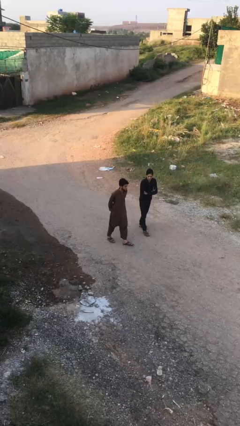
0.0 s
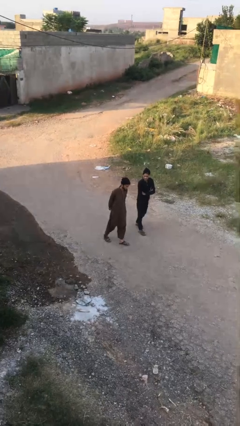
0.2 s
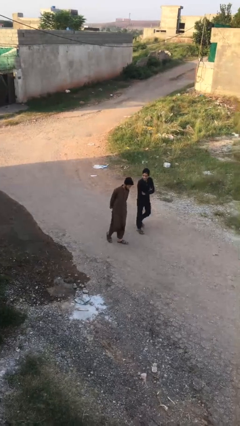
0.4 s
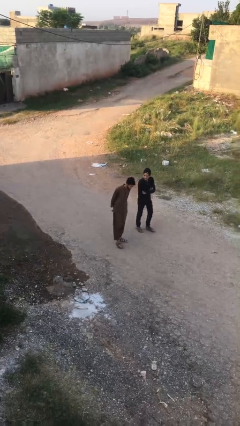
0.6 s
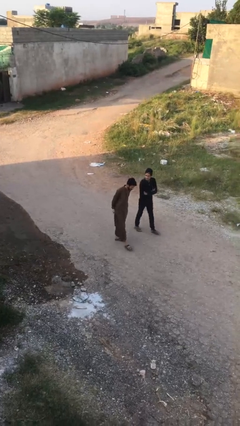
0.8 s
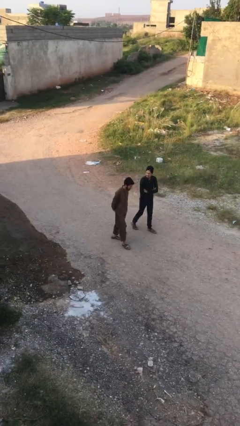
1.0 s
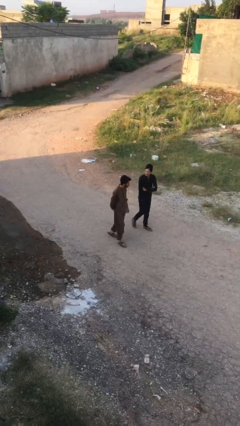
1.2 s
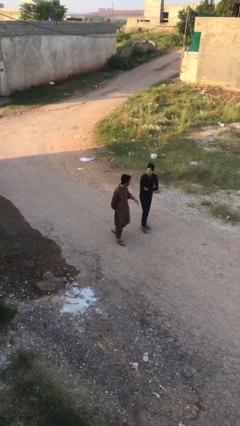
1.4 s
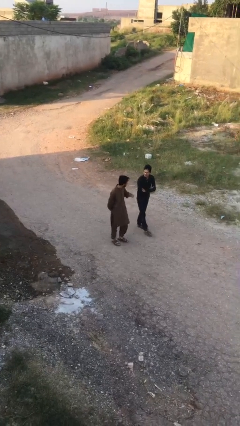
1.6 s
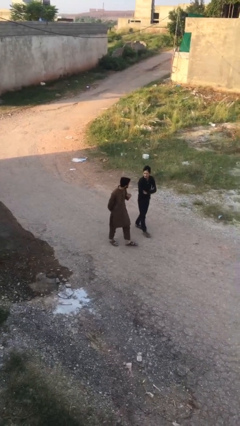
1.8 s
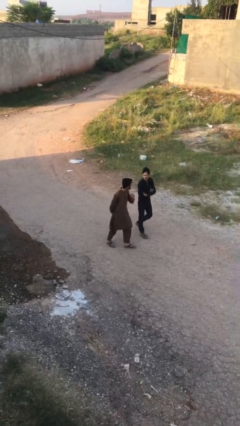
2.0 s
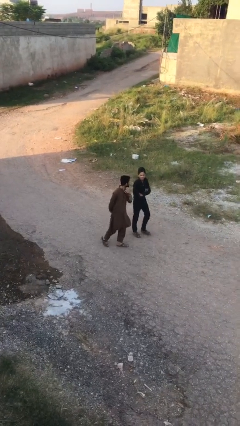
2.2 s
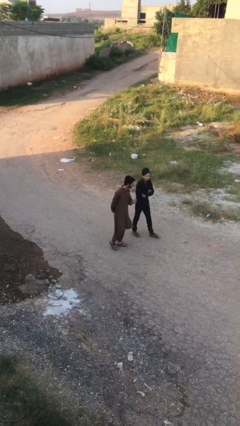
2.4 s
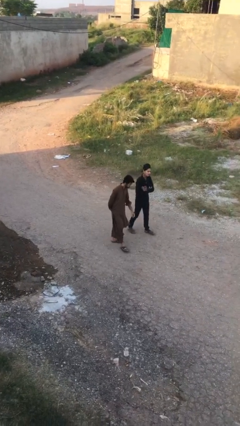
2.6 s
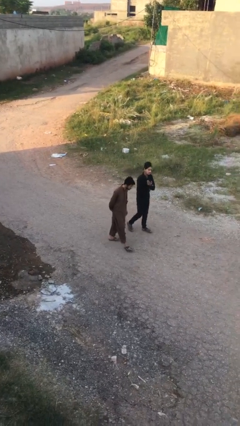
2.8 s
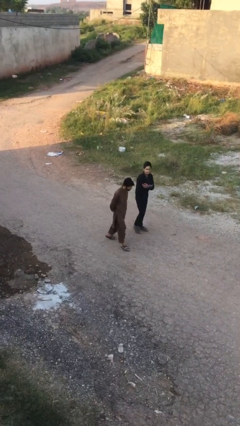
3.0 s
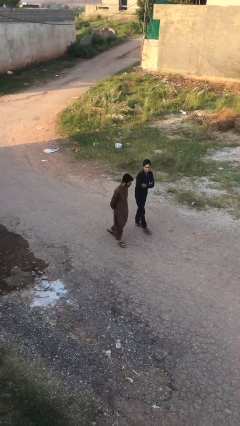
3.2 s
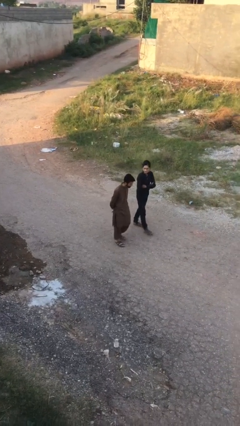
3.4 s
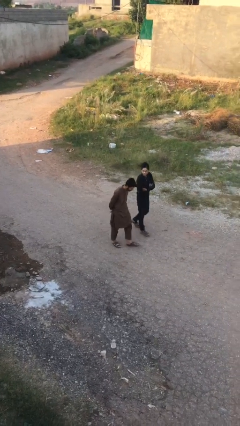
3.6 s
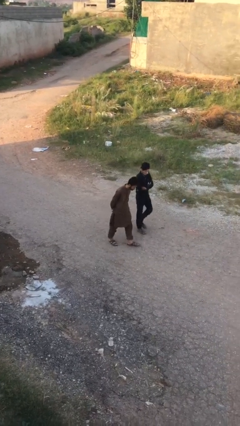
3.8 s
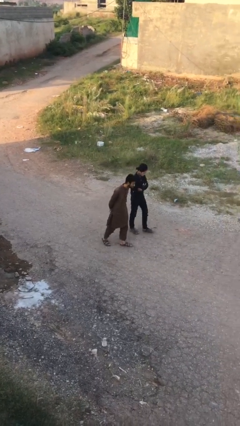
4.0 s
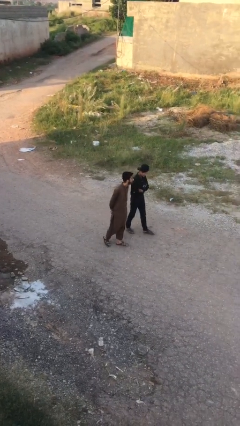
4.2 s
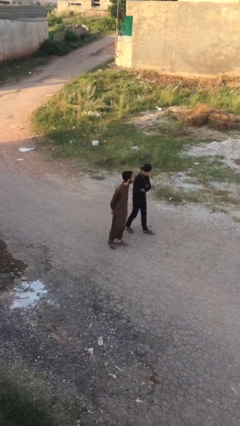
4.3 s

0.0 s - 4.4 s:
person talks to person

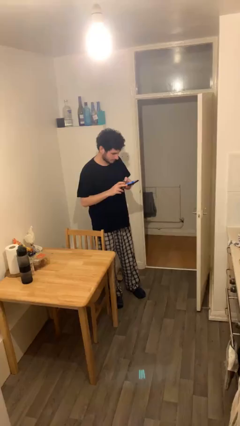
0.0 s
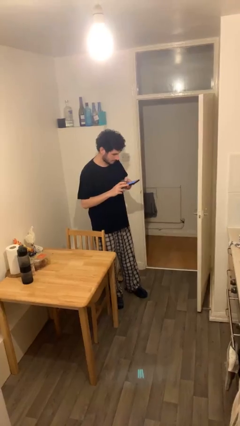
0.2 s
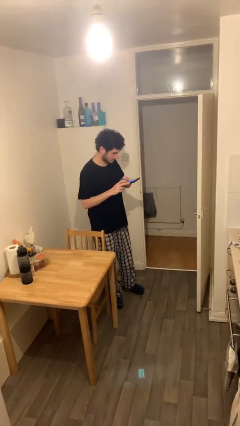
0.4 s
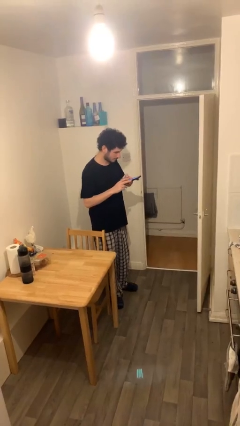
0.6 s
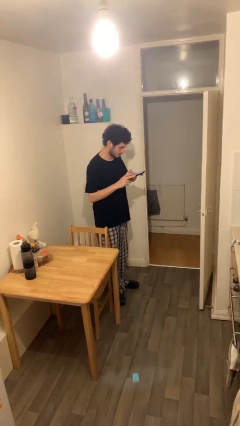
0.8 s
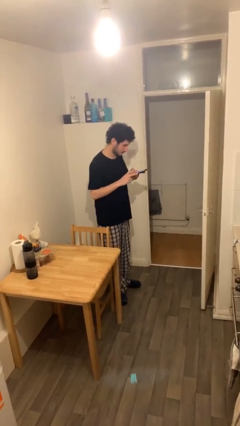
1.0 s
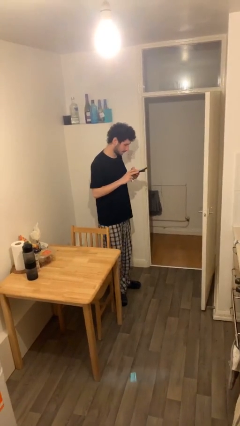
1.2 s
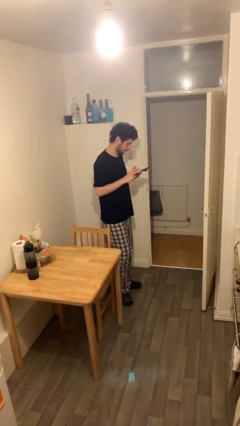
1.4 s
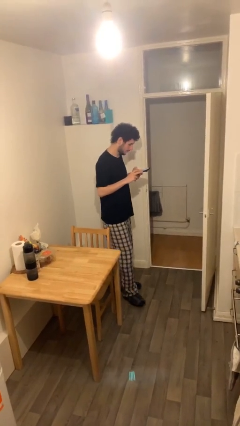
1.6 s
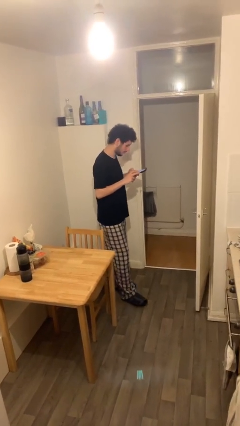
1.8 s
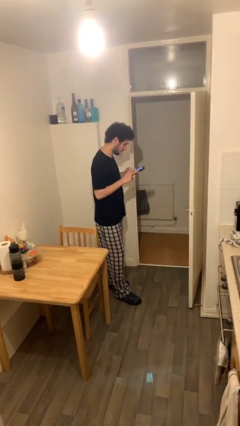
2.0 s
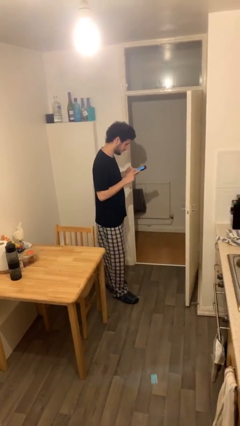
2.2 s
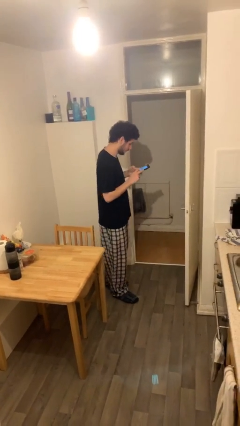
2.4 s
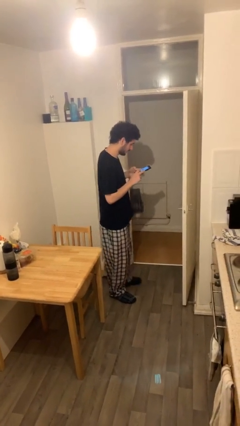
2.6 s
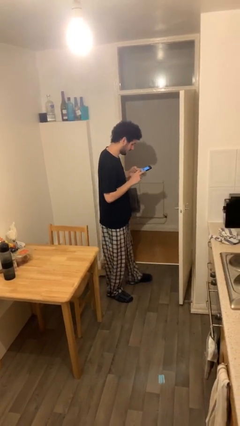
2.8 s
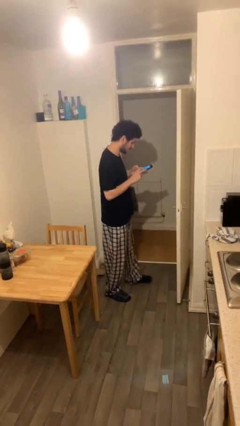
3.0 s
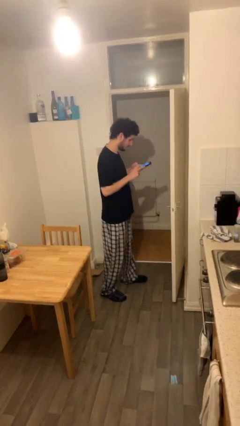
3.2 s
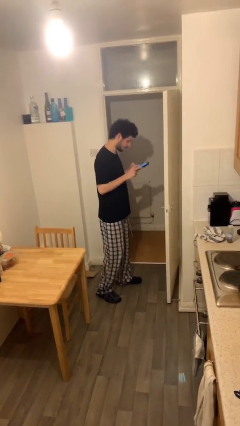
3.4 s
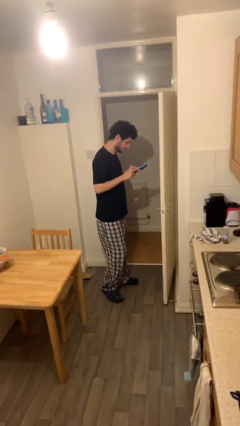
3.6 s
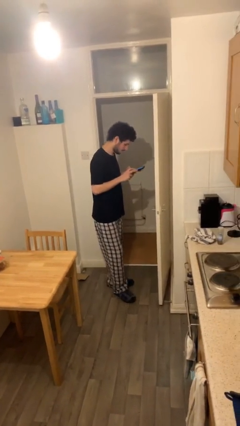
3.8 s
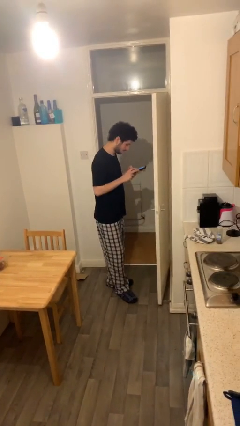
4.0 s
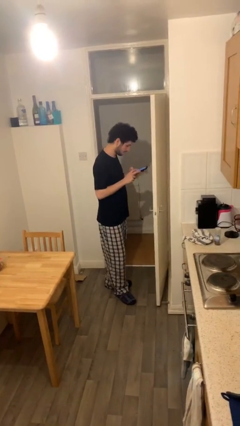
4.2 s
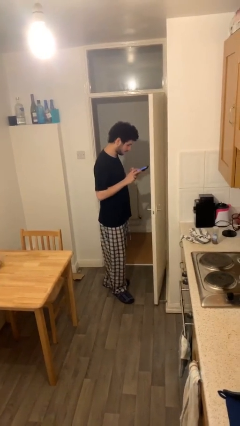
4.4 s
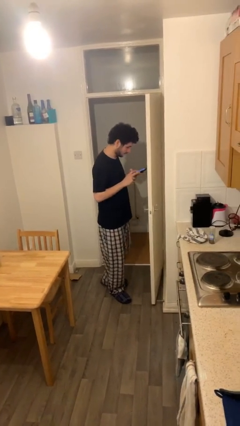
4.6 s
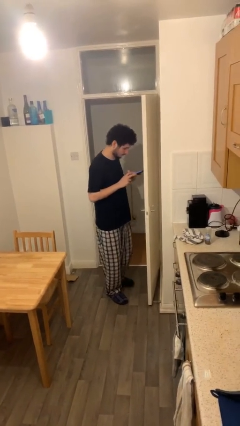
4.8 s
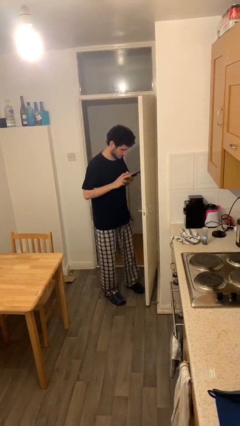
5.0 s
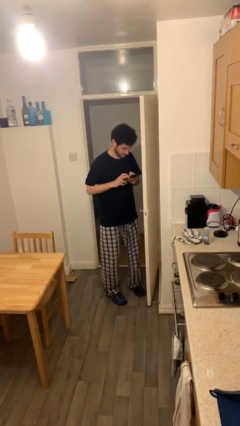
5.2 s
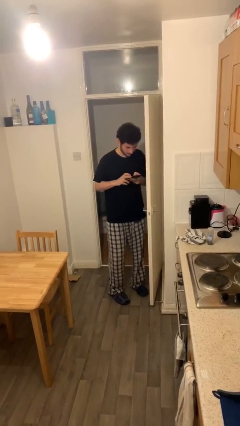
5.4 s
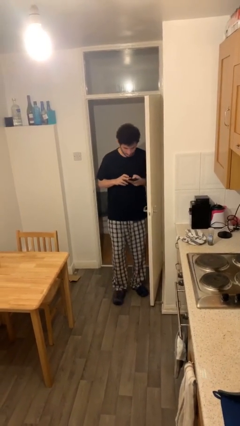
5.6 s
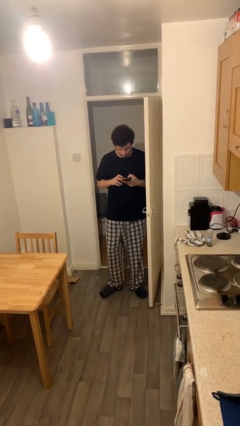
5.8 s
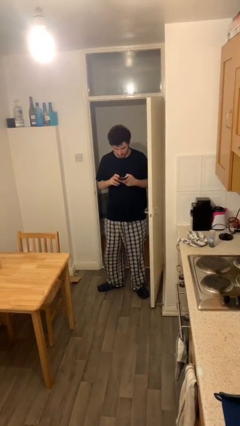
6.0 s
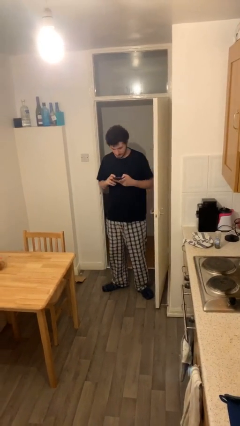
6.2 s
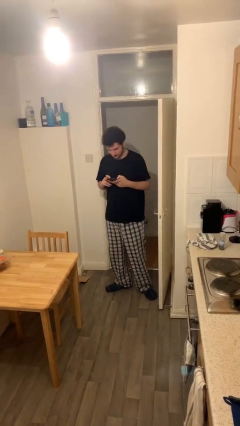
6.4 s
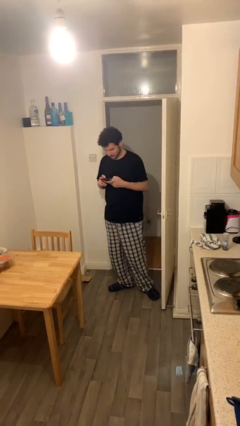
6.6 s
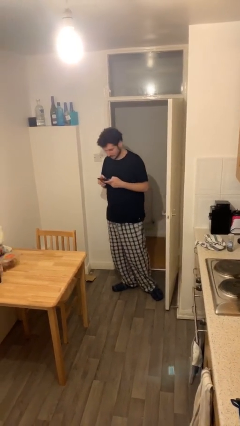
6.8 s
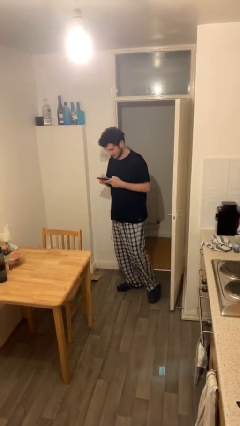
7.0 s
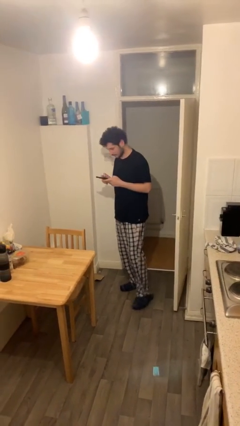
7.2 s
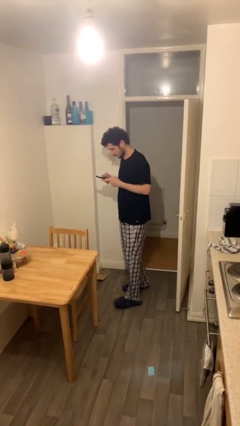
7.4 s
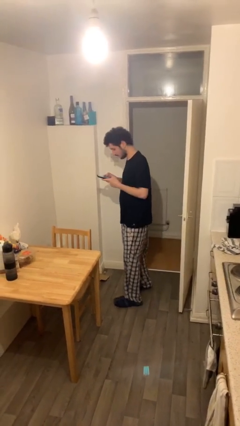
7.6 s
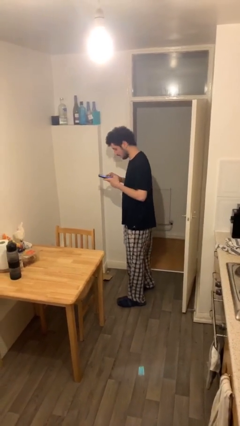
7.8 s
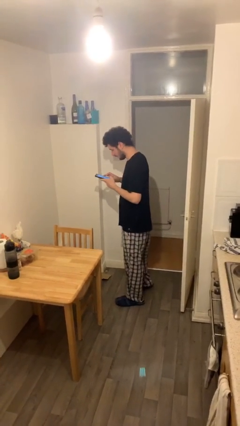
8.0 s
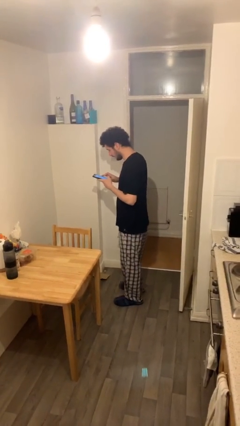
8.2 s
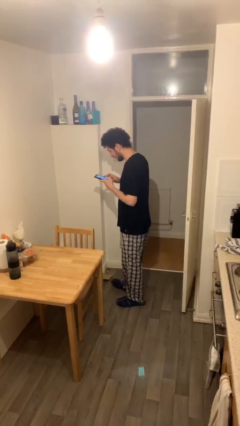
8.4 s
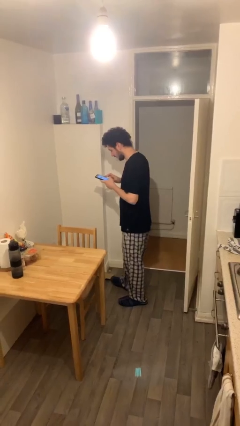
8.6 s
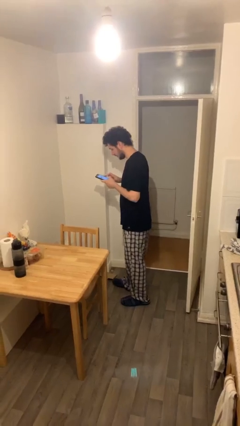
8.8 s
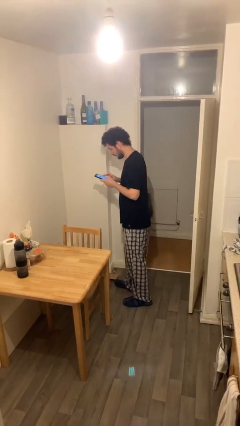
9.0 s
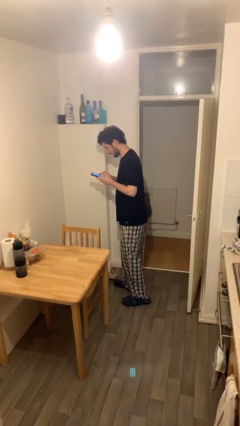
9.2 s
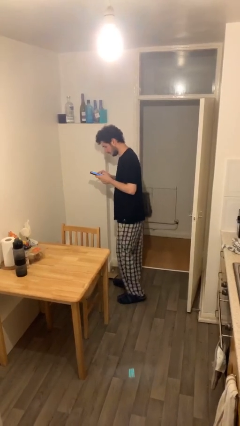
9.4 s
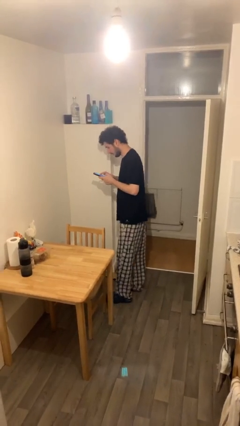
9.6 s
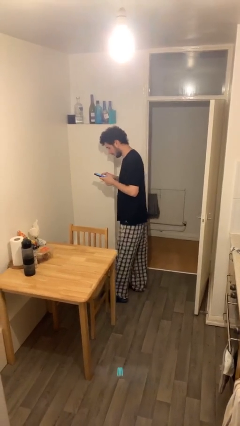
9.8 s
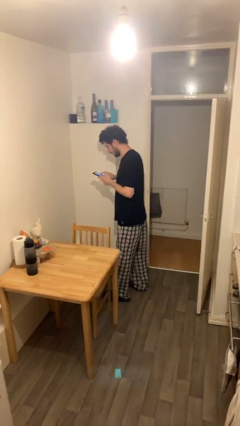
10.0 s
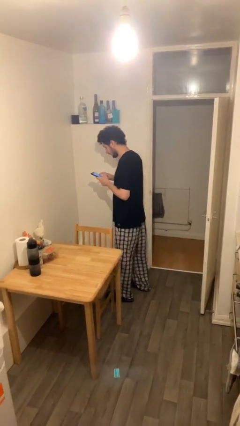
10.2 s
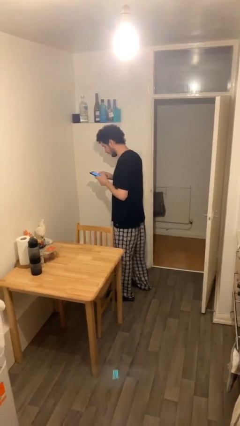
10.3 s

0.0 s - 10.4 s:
person texts on phone

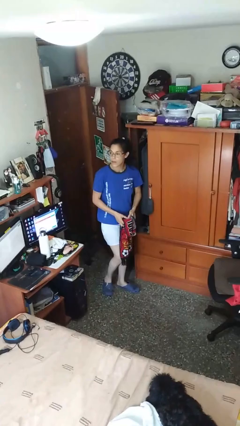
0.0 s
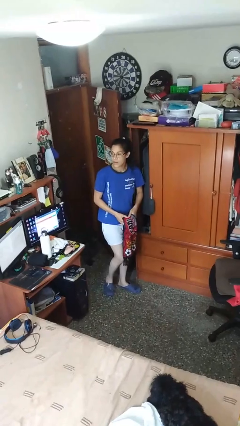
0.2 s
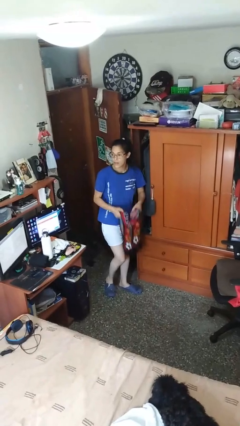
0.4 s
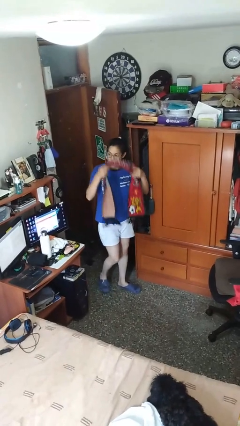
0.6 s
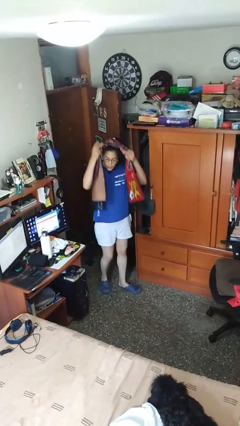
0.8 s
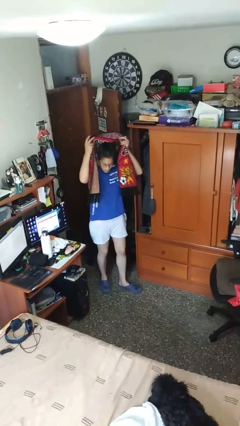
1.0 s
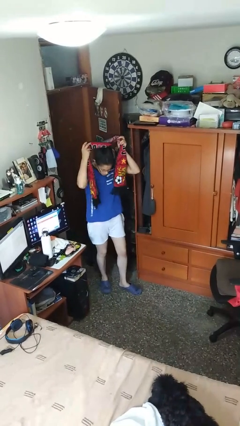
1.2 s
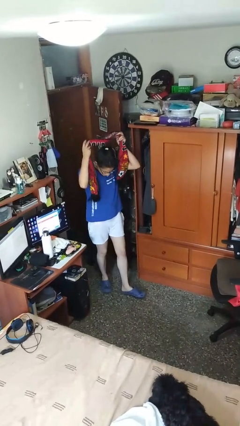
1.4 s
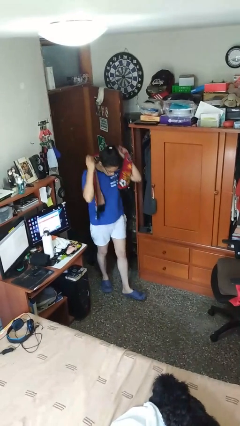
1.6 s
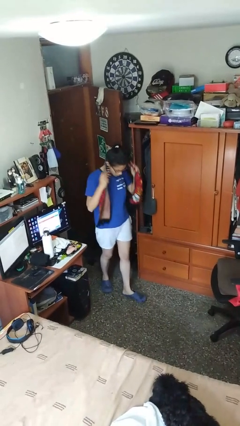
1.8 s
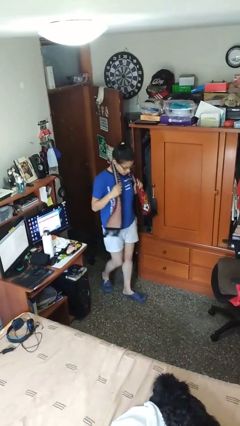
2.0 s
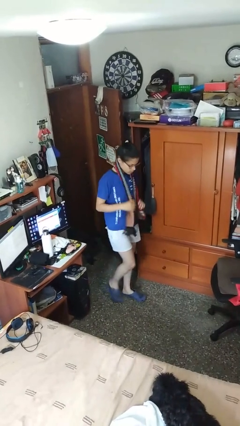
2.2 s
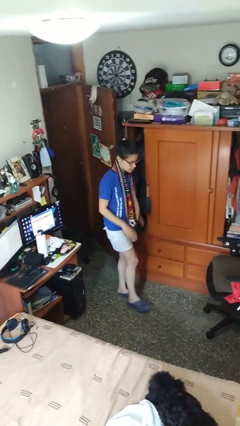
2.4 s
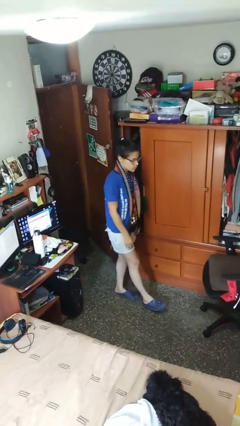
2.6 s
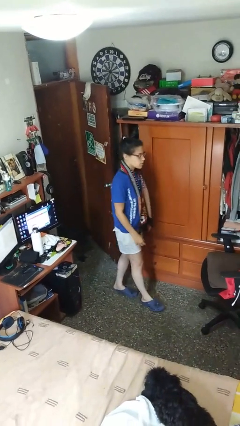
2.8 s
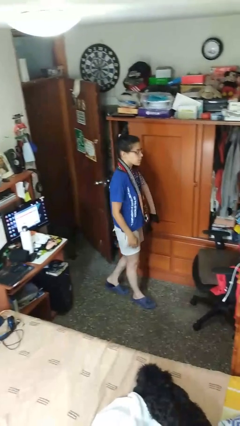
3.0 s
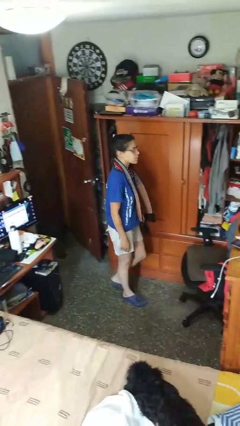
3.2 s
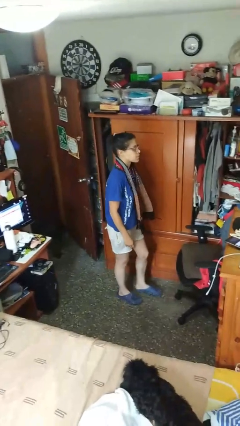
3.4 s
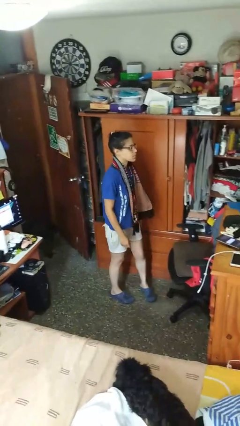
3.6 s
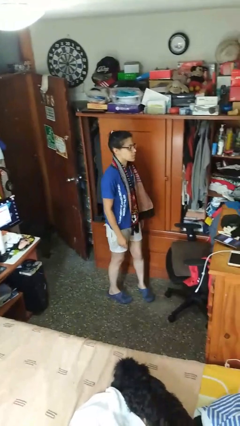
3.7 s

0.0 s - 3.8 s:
person puts on scarf
